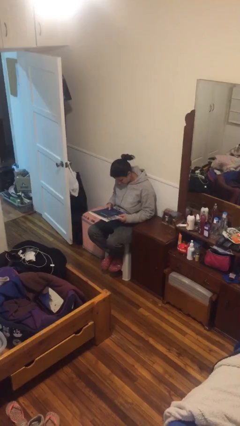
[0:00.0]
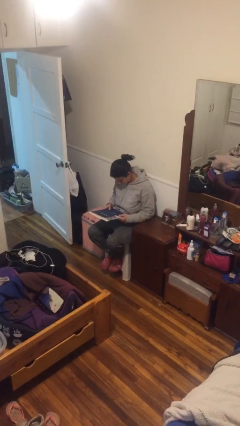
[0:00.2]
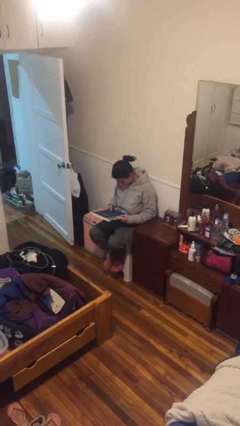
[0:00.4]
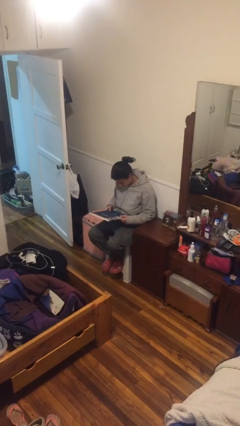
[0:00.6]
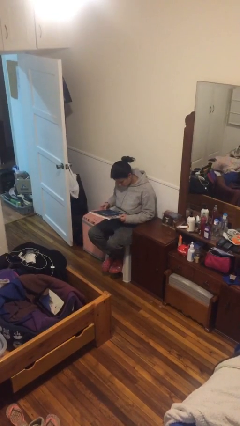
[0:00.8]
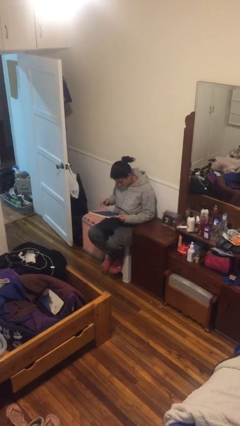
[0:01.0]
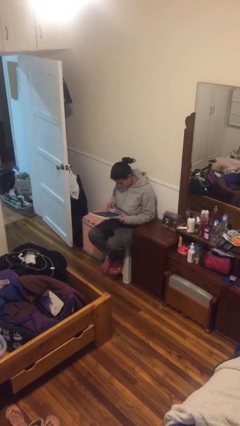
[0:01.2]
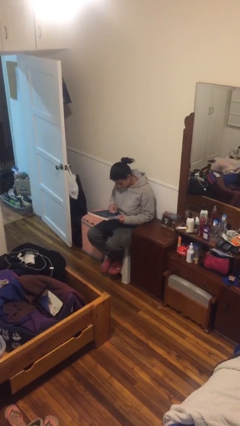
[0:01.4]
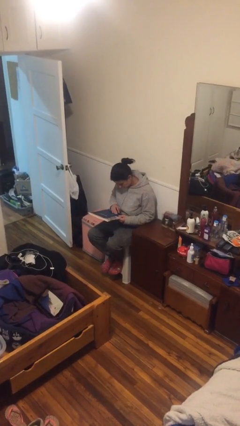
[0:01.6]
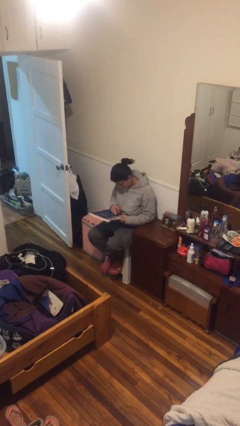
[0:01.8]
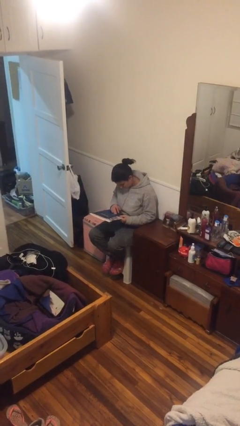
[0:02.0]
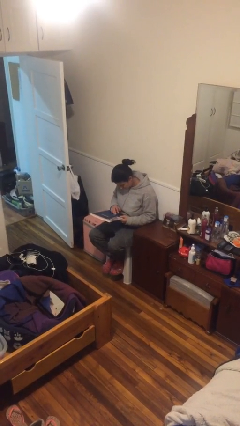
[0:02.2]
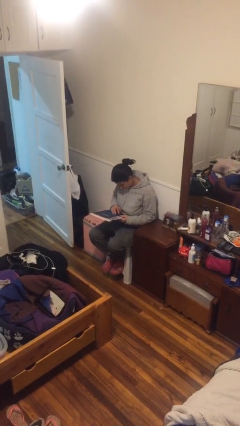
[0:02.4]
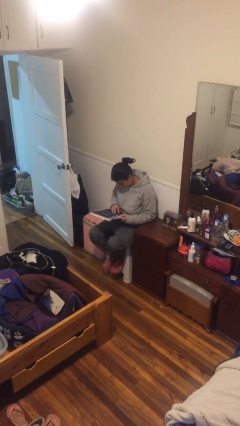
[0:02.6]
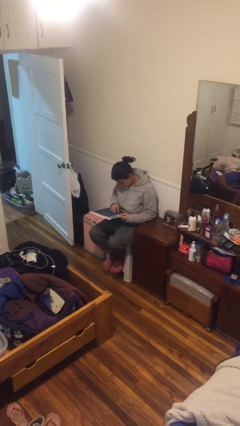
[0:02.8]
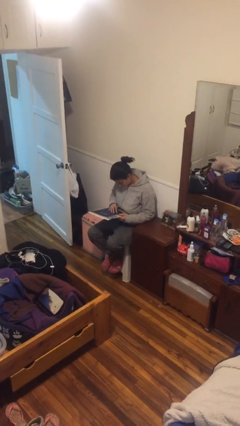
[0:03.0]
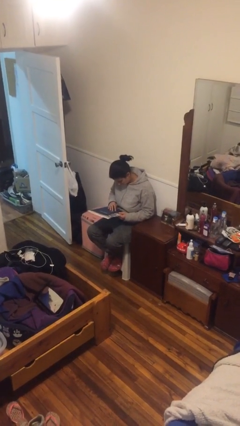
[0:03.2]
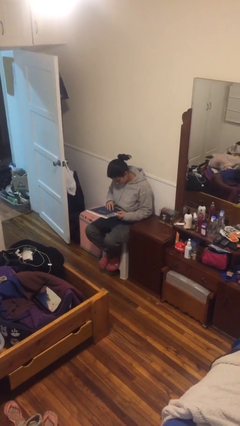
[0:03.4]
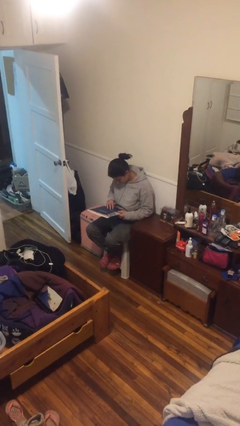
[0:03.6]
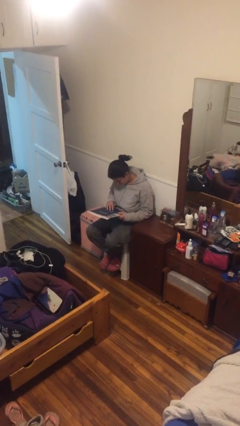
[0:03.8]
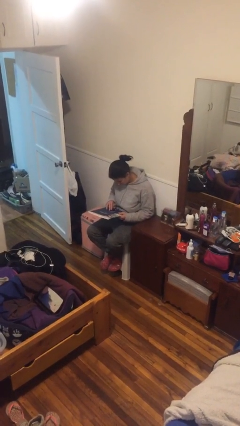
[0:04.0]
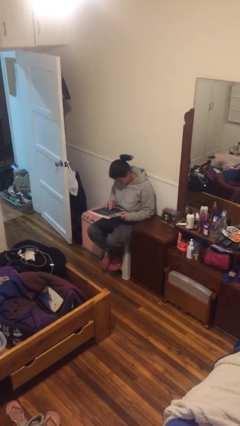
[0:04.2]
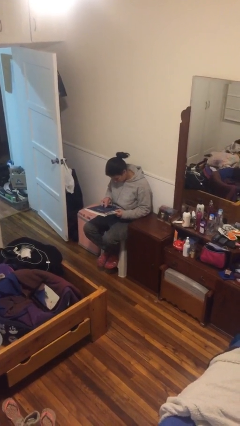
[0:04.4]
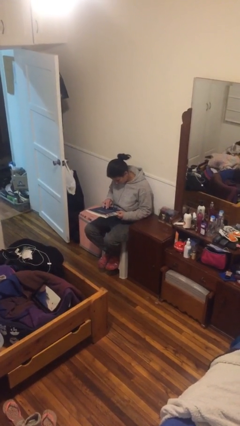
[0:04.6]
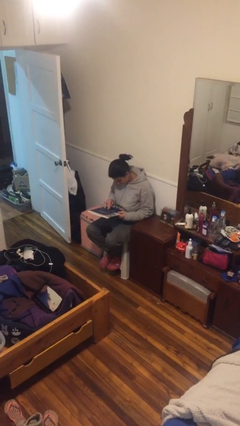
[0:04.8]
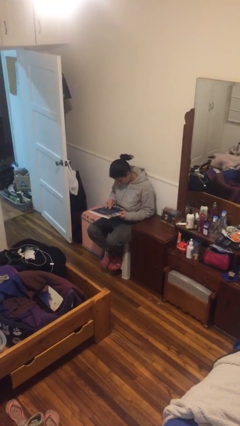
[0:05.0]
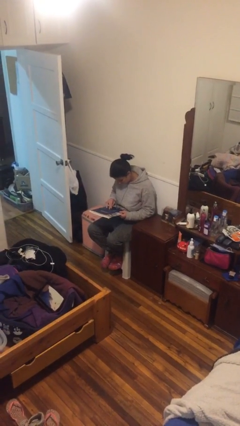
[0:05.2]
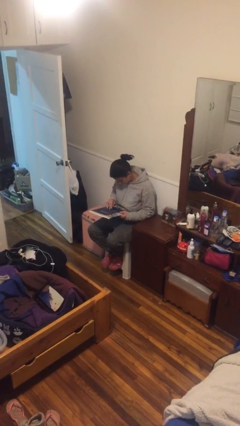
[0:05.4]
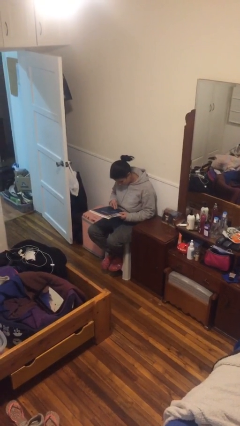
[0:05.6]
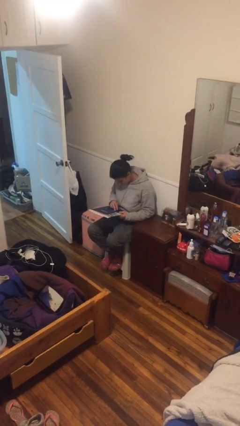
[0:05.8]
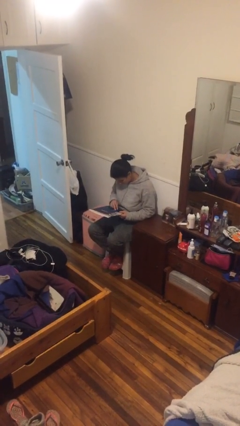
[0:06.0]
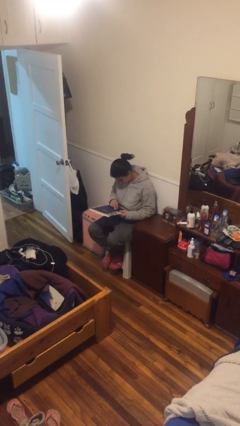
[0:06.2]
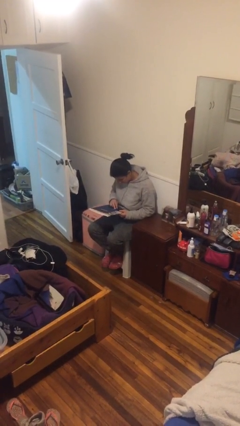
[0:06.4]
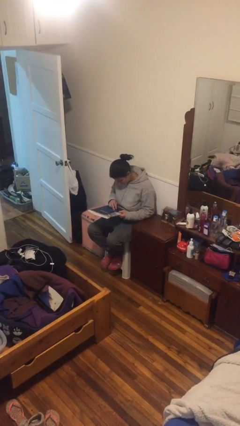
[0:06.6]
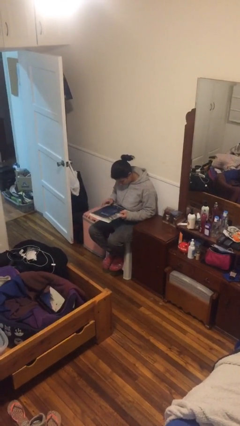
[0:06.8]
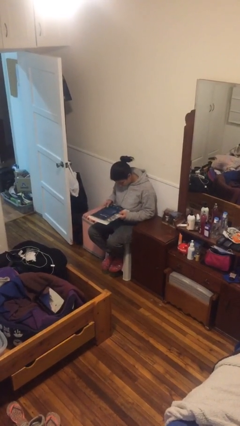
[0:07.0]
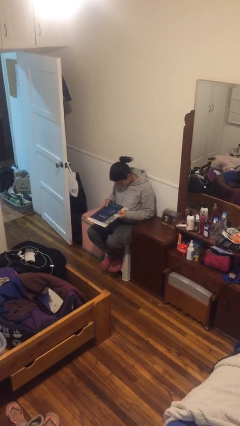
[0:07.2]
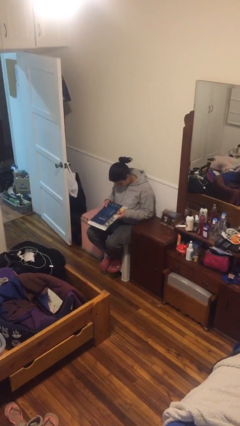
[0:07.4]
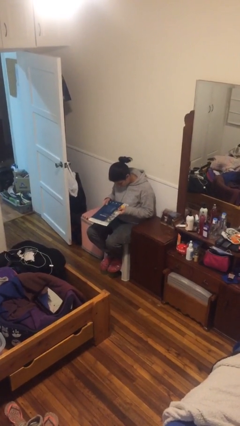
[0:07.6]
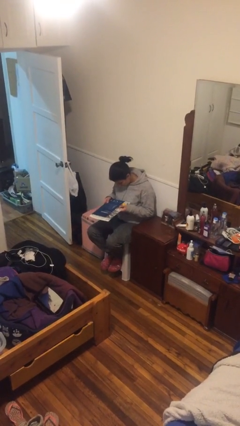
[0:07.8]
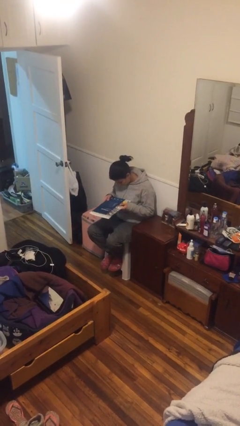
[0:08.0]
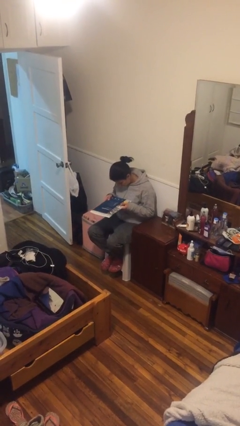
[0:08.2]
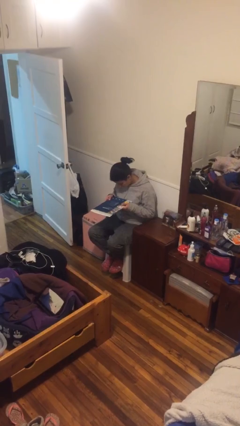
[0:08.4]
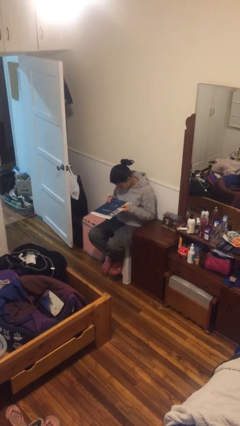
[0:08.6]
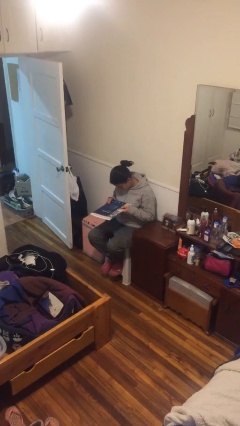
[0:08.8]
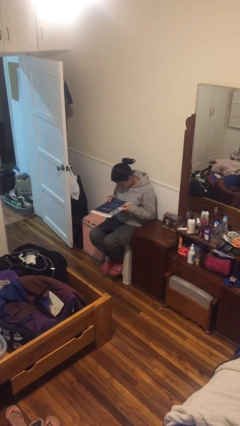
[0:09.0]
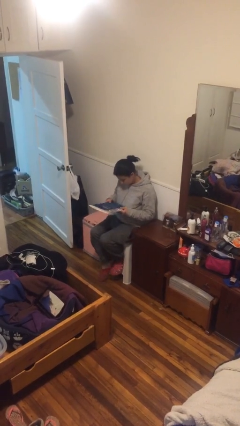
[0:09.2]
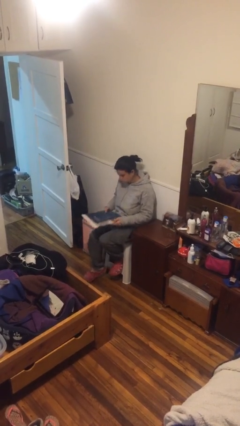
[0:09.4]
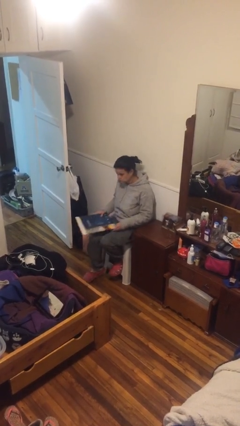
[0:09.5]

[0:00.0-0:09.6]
person reads document

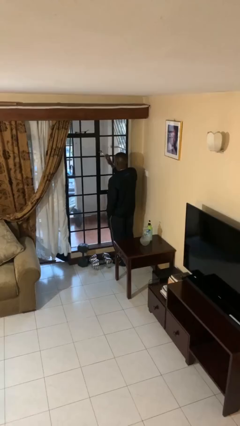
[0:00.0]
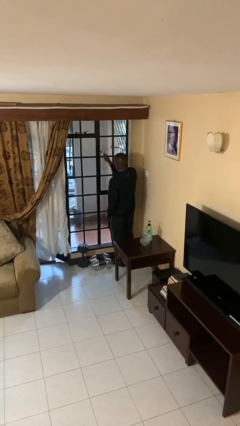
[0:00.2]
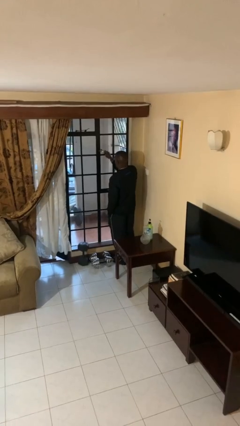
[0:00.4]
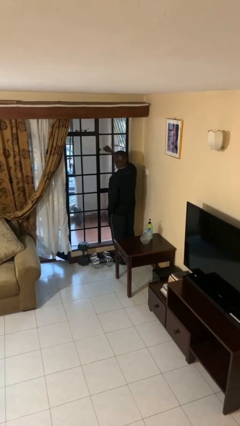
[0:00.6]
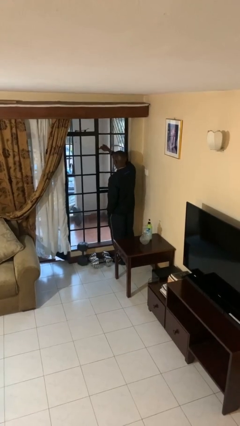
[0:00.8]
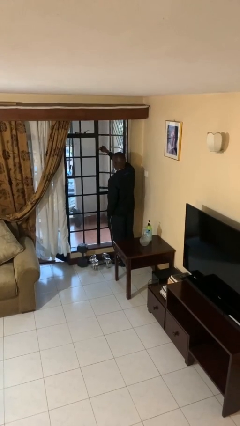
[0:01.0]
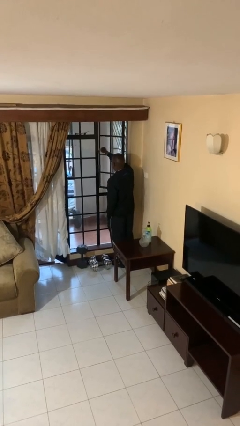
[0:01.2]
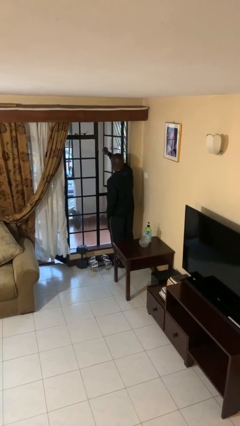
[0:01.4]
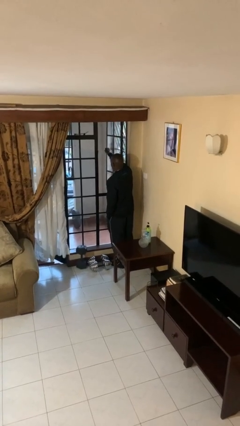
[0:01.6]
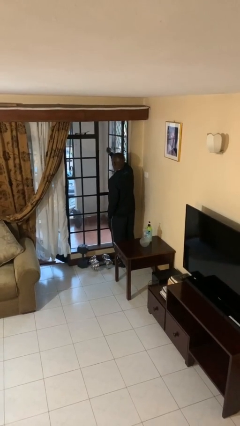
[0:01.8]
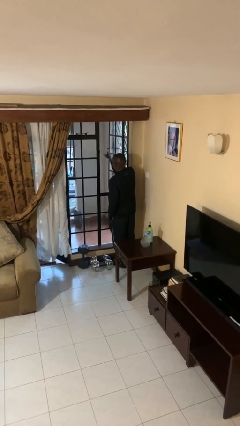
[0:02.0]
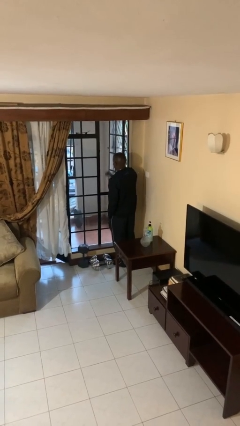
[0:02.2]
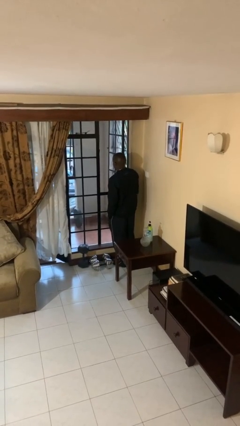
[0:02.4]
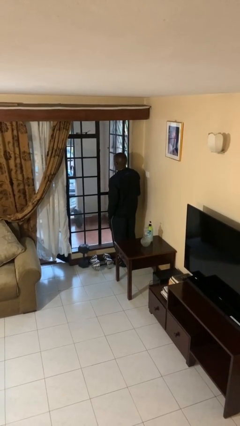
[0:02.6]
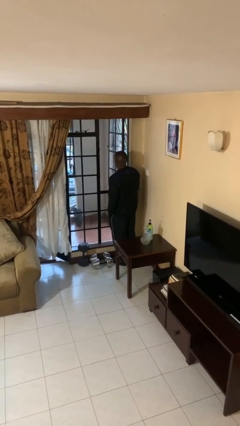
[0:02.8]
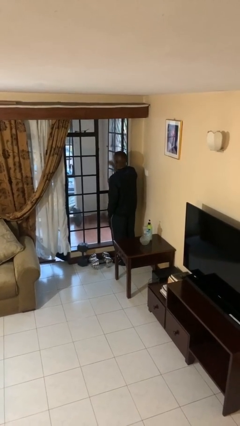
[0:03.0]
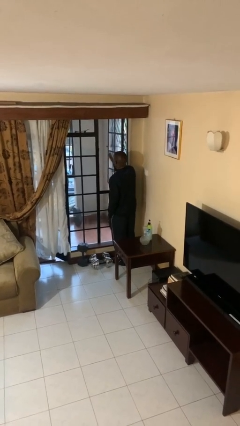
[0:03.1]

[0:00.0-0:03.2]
person opens home window

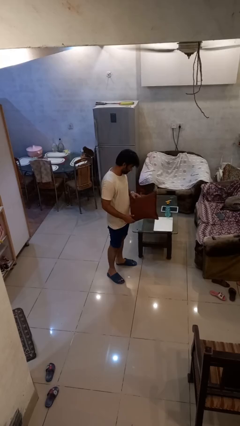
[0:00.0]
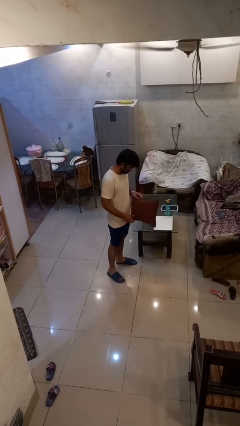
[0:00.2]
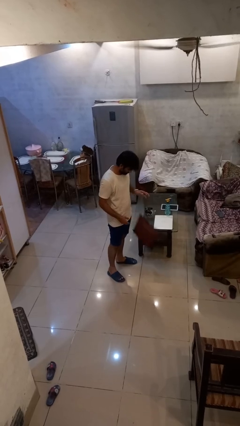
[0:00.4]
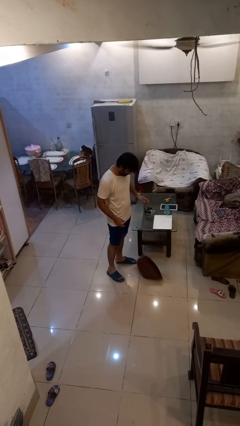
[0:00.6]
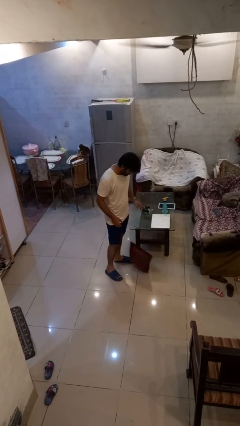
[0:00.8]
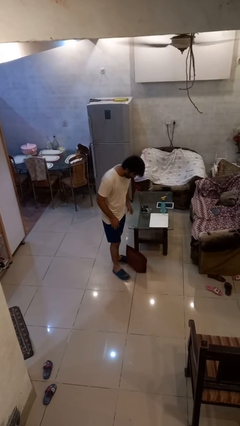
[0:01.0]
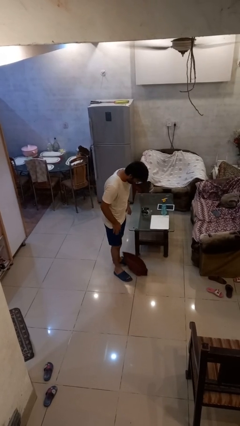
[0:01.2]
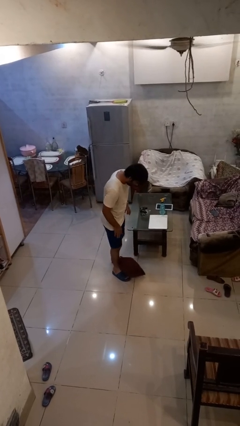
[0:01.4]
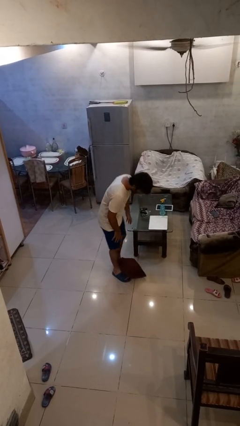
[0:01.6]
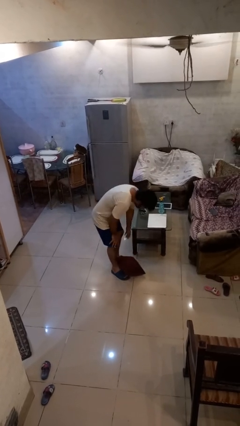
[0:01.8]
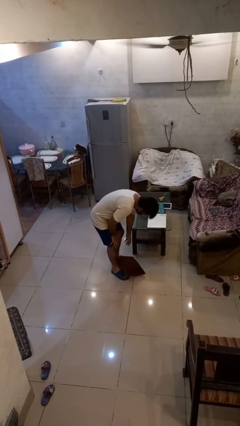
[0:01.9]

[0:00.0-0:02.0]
person drops object

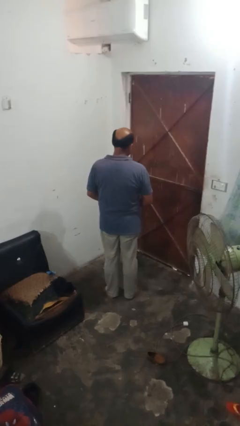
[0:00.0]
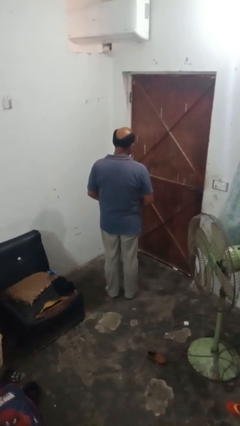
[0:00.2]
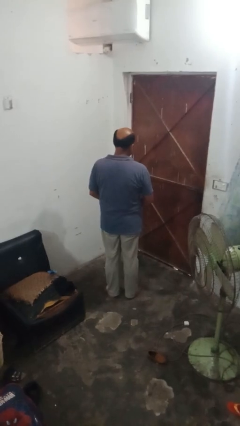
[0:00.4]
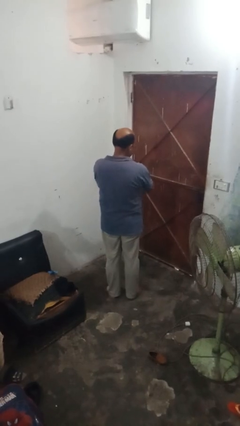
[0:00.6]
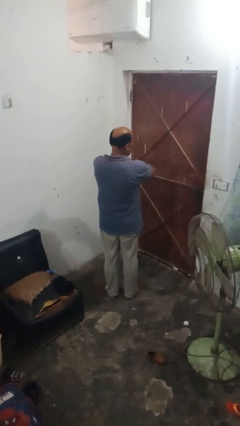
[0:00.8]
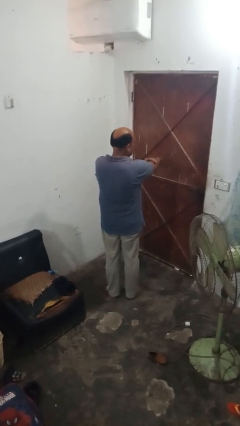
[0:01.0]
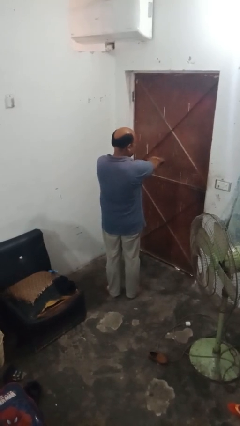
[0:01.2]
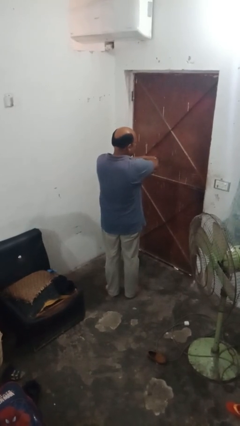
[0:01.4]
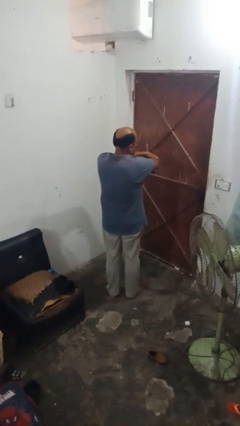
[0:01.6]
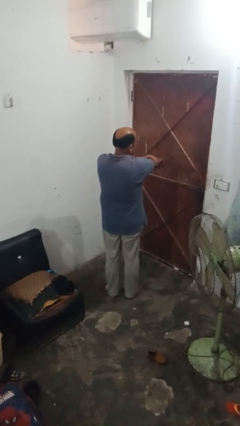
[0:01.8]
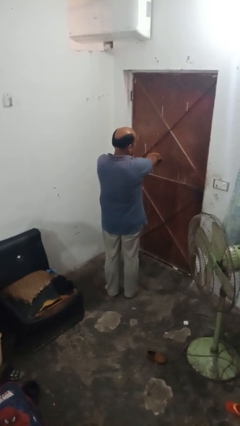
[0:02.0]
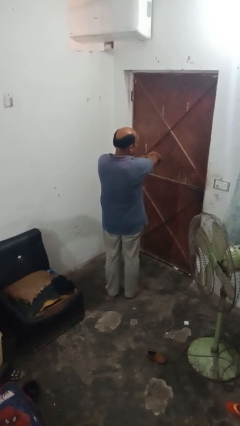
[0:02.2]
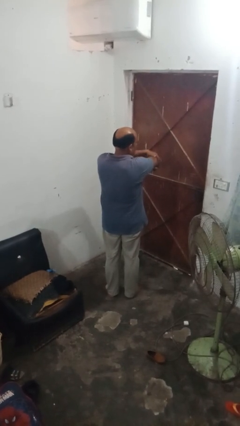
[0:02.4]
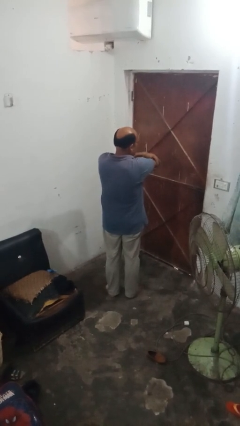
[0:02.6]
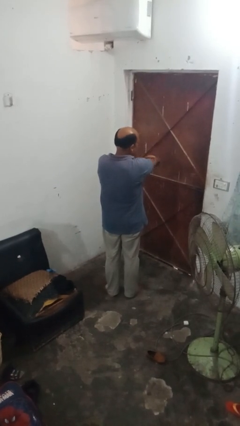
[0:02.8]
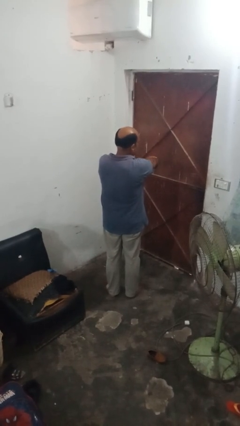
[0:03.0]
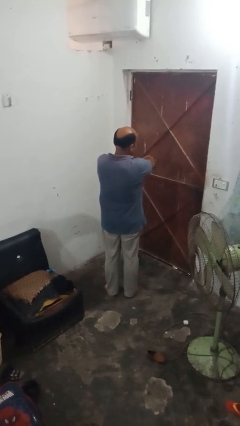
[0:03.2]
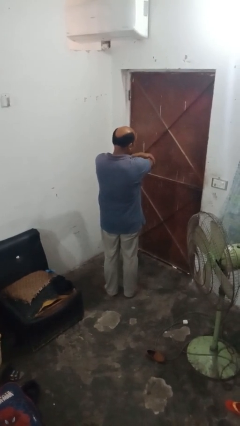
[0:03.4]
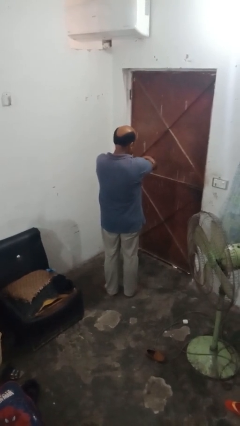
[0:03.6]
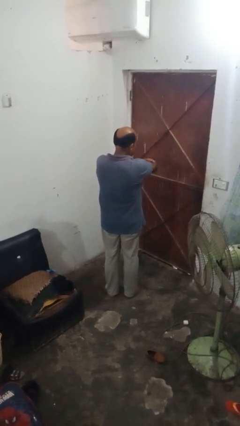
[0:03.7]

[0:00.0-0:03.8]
person applies sunscreen
